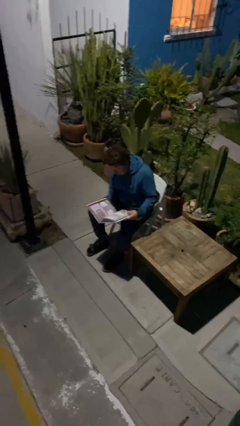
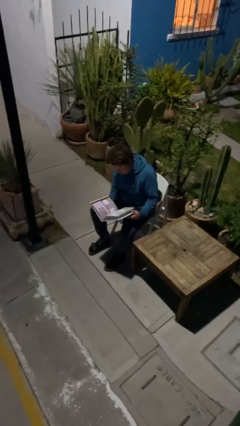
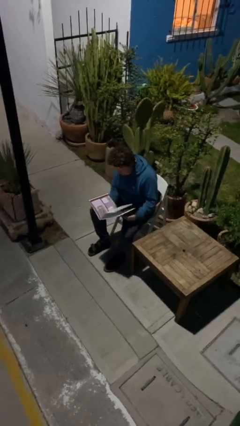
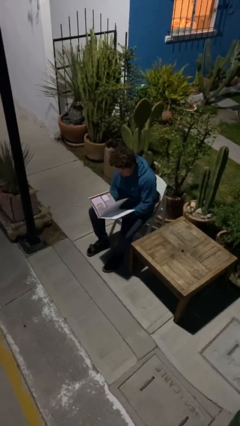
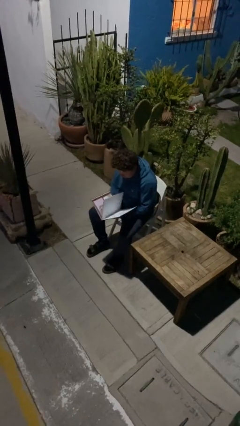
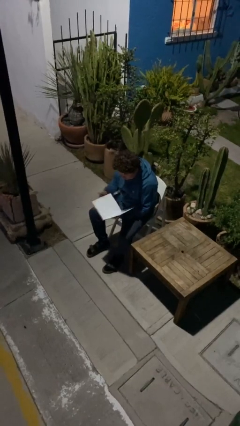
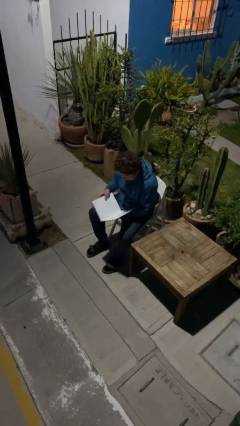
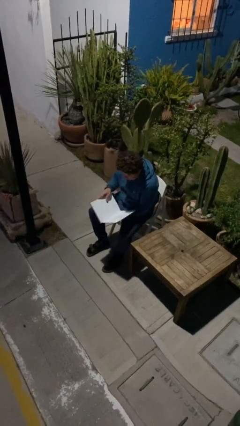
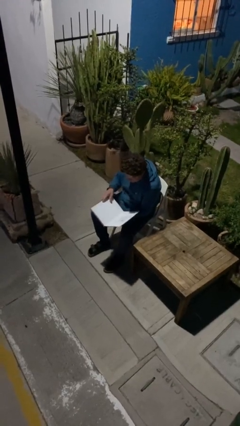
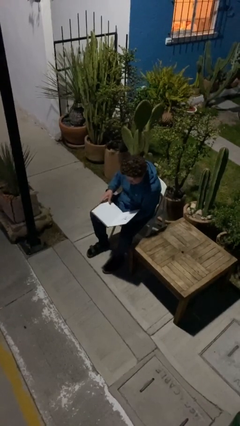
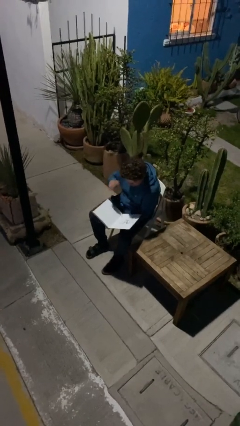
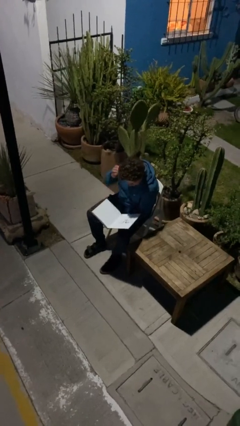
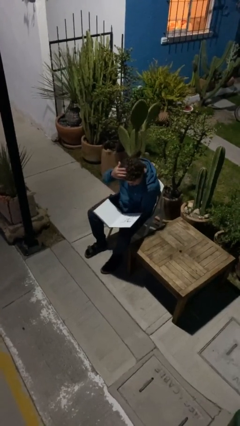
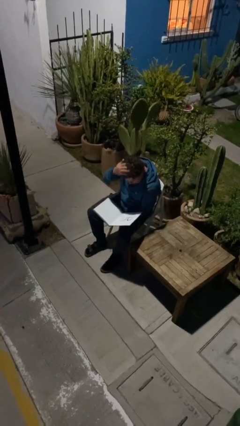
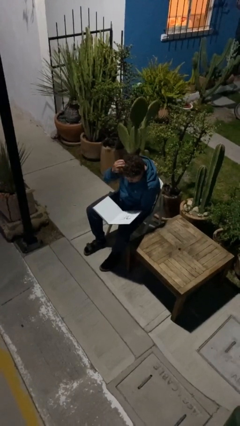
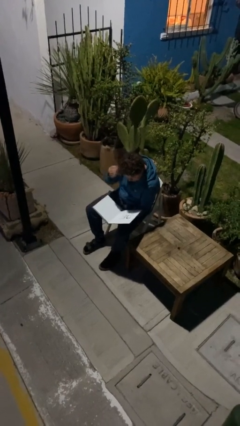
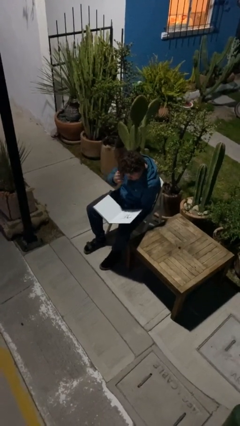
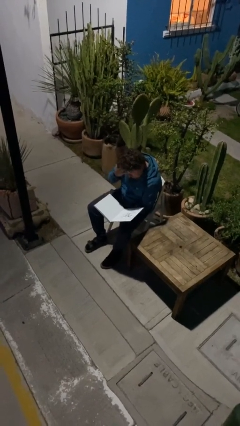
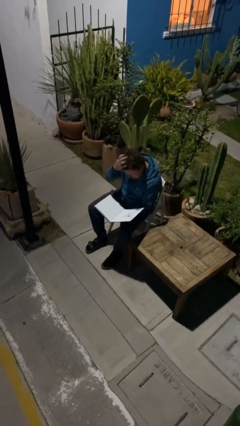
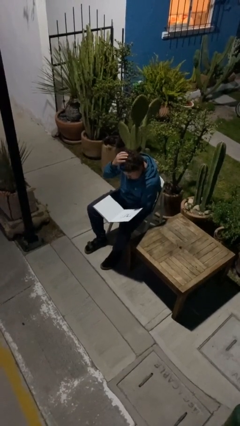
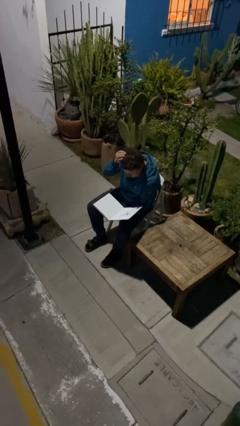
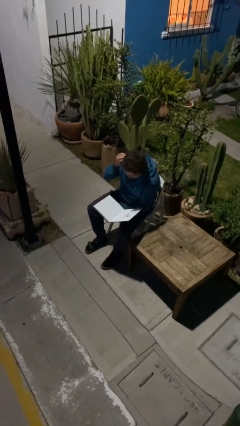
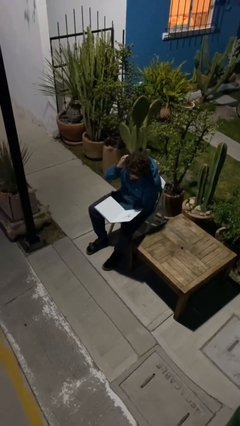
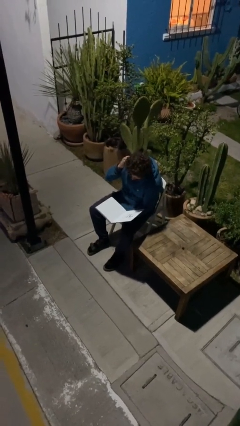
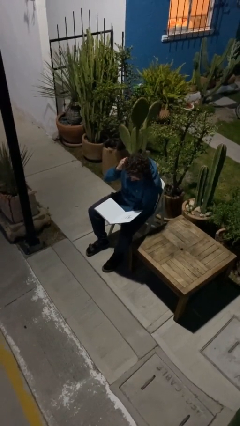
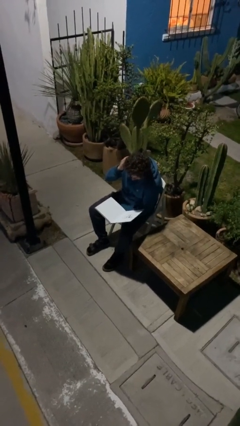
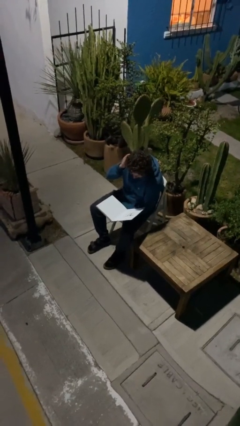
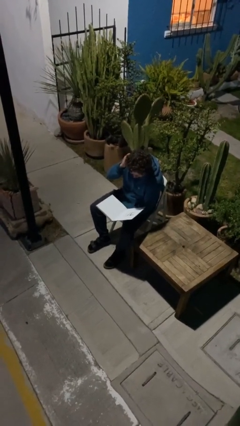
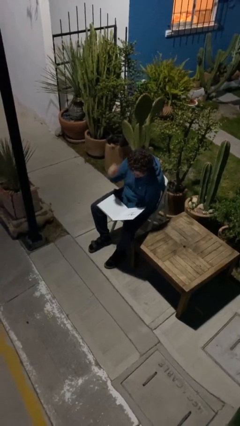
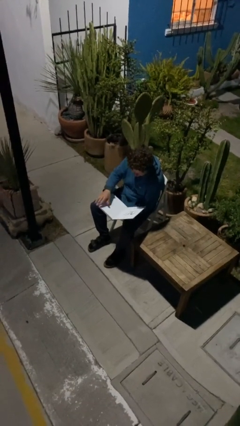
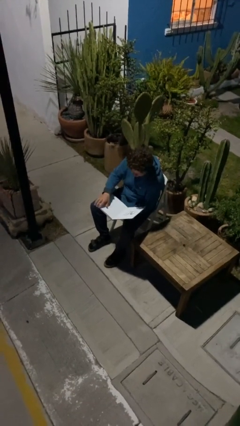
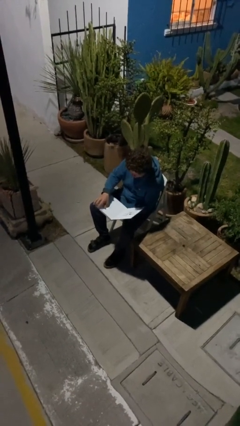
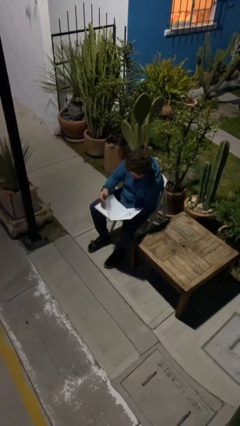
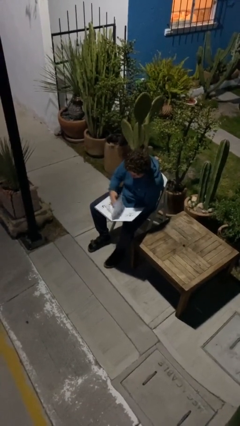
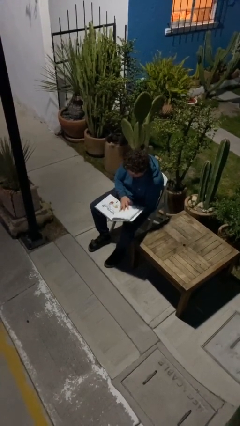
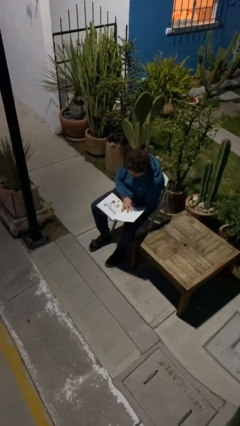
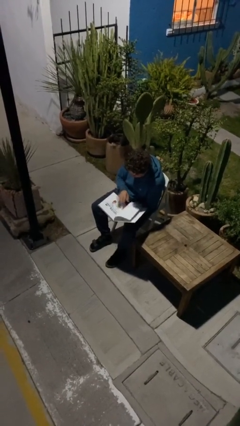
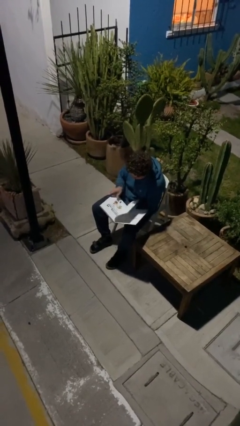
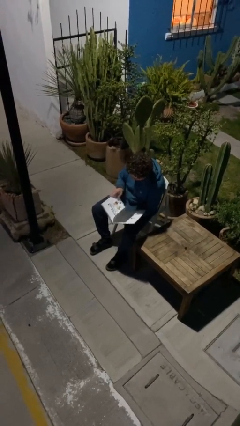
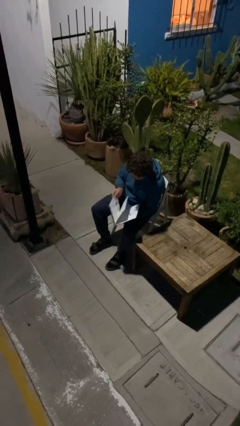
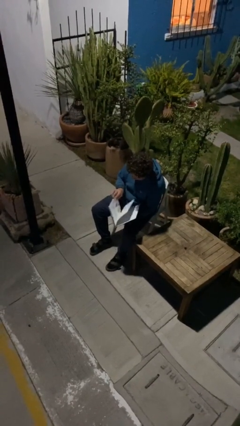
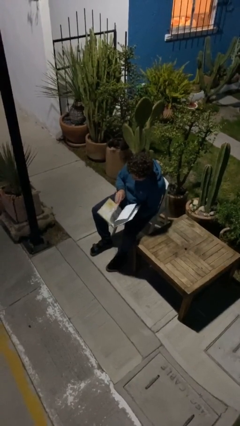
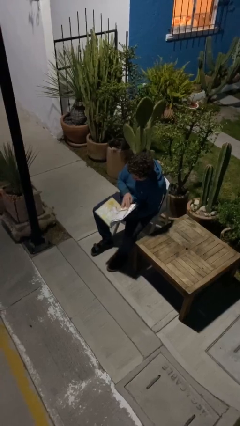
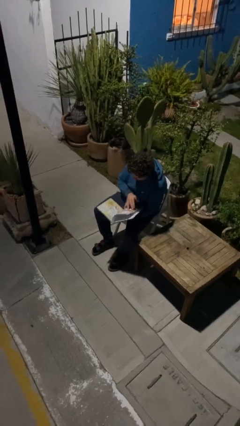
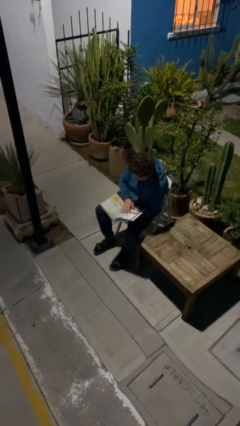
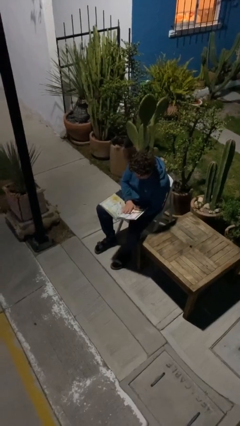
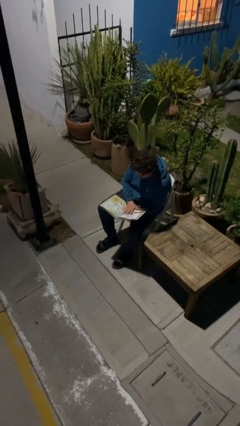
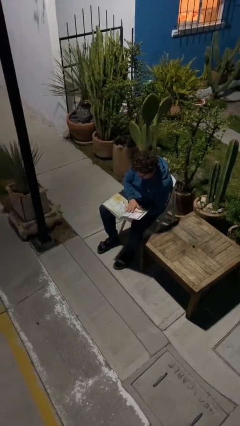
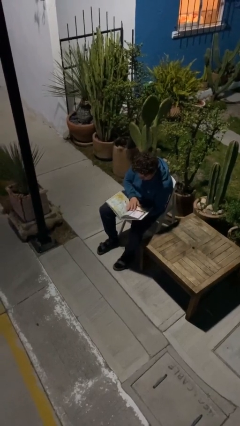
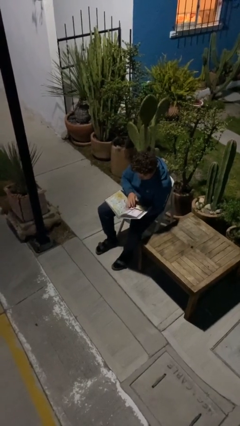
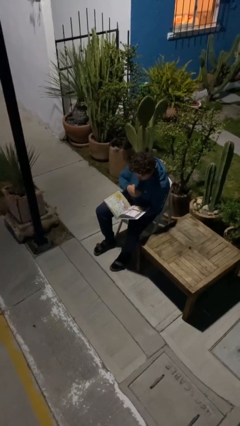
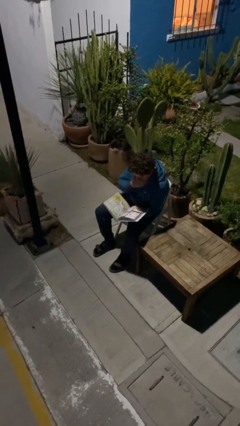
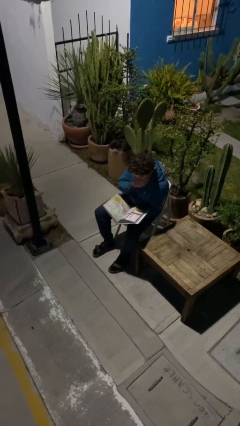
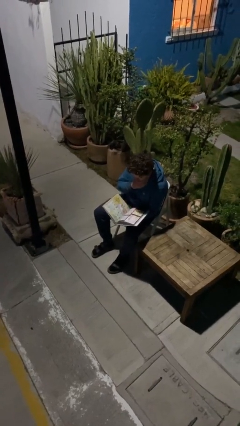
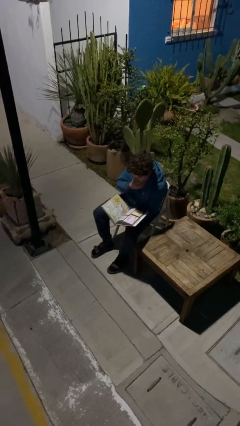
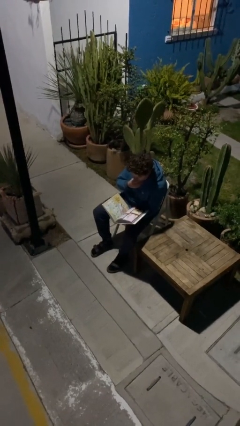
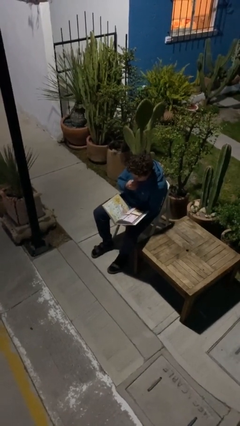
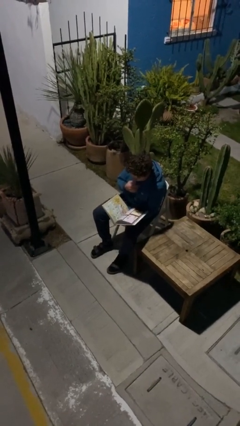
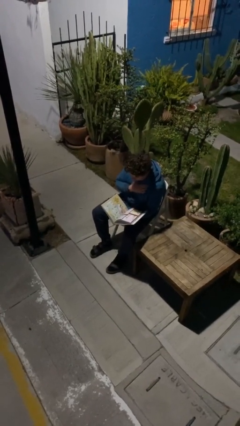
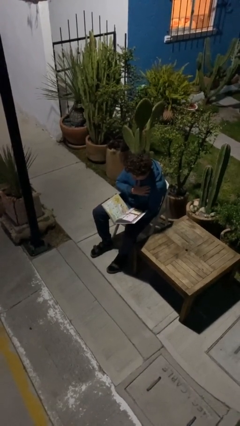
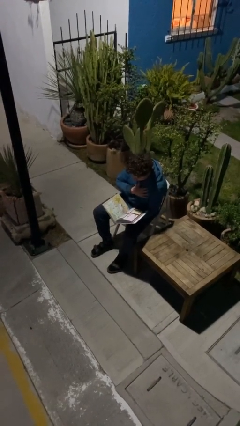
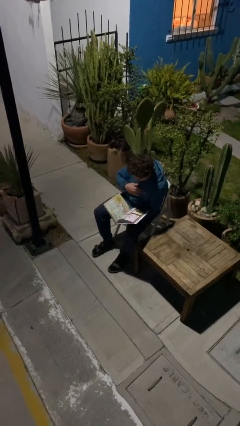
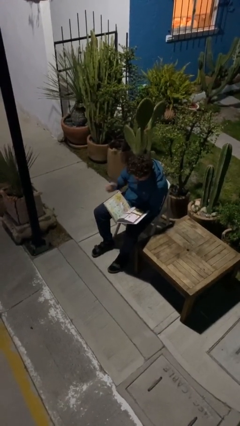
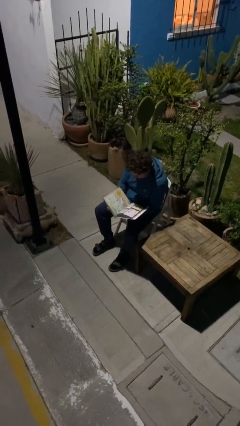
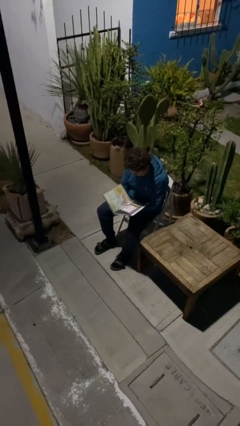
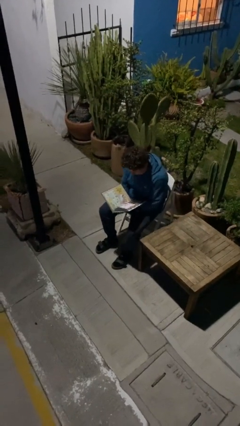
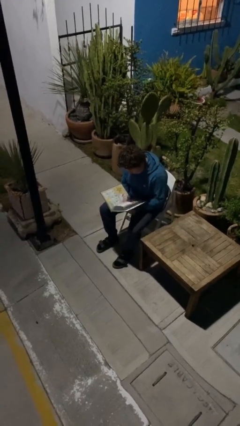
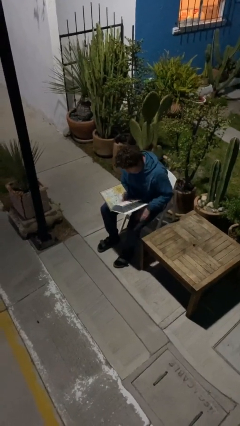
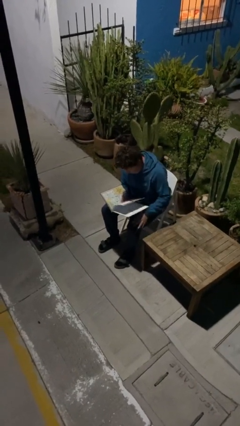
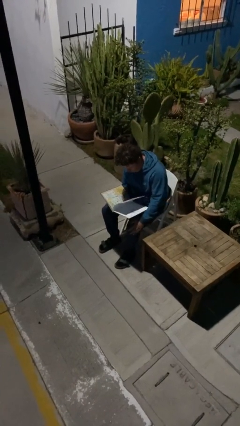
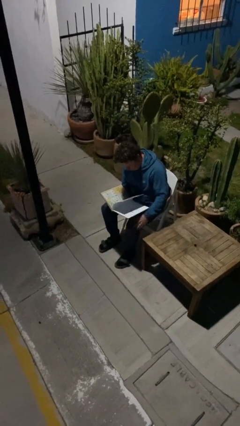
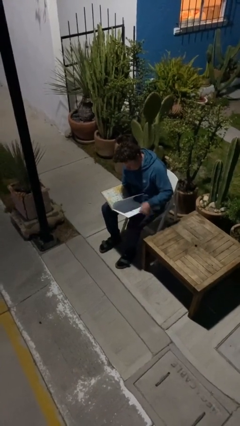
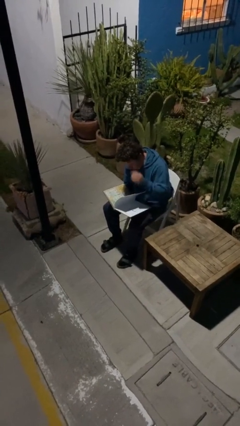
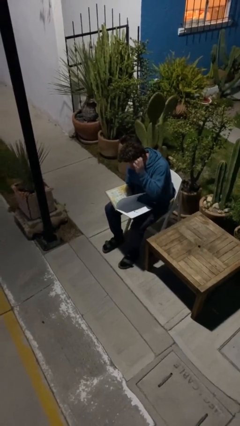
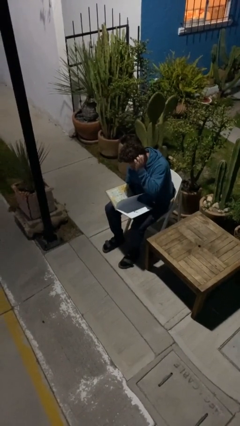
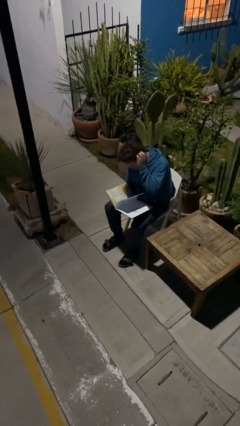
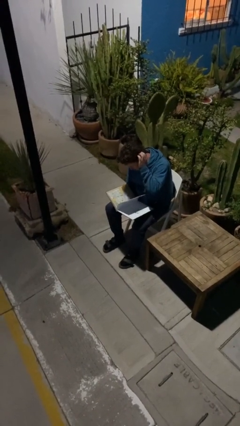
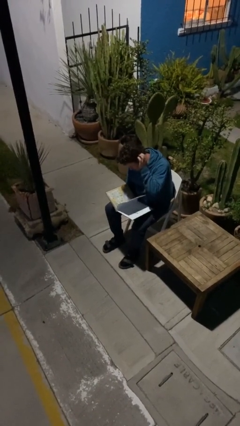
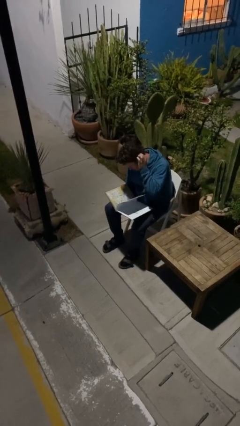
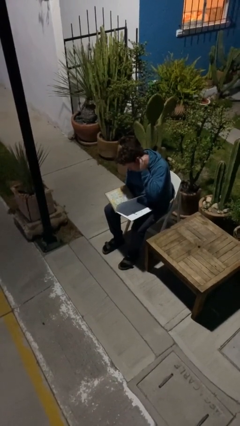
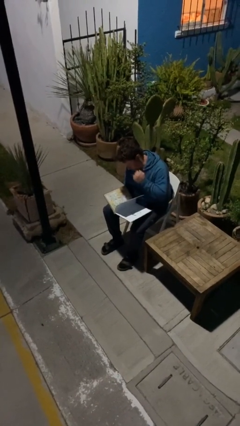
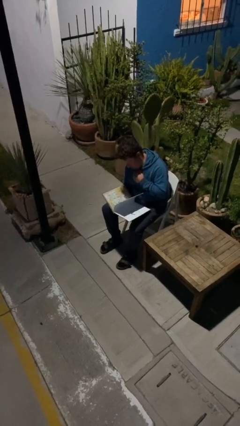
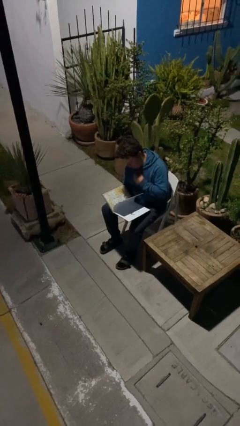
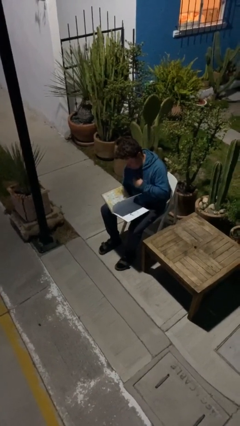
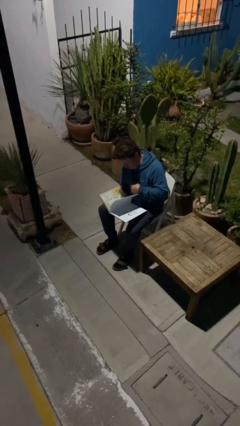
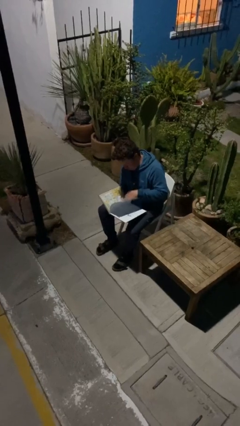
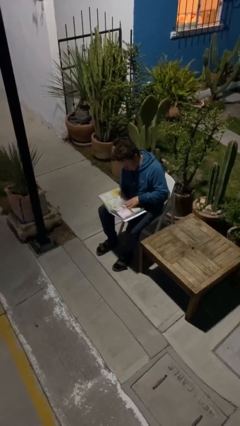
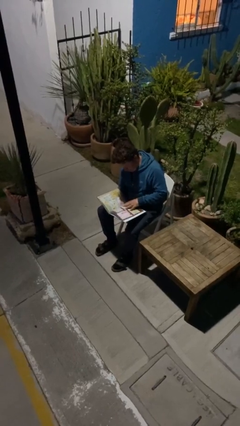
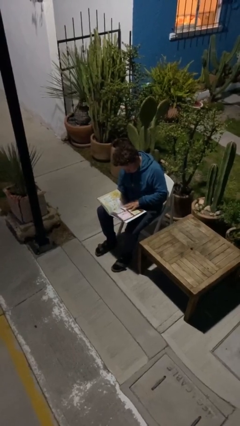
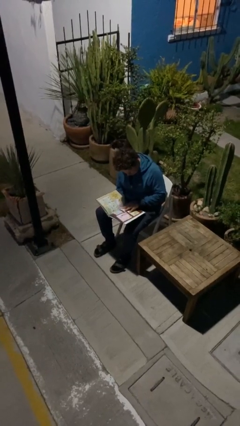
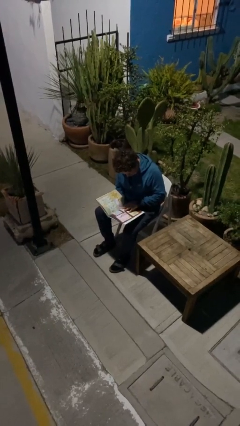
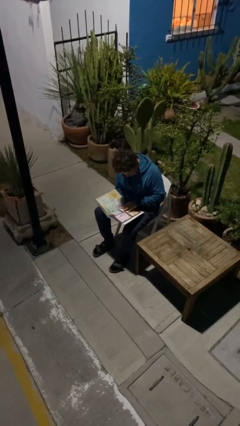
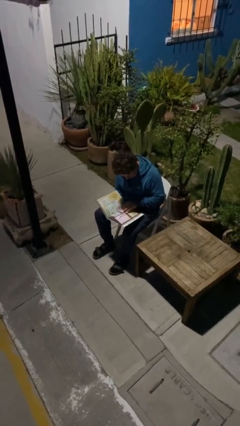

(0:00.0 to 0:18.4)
person reads document

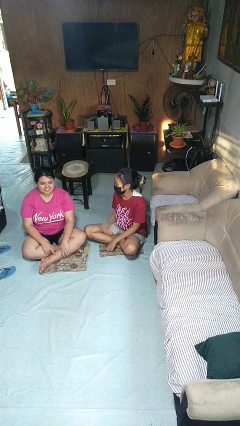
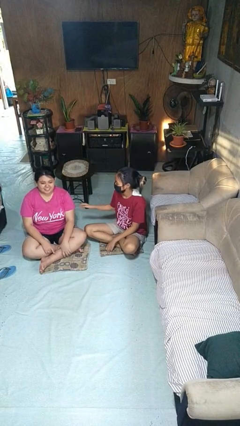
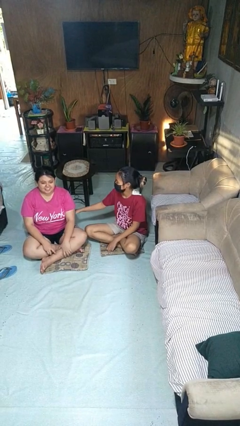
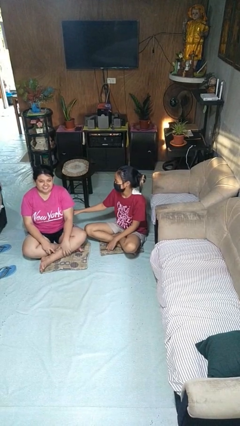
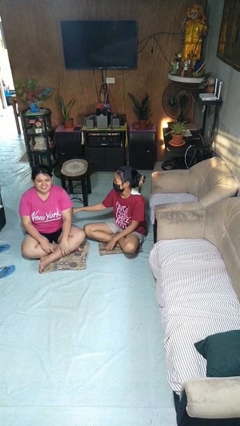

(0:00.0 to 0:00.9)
person tickles person
